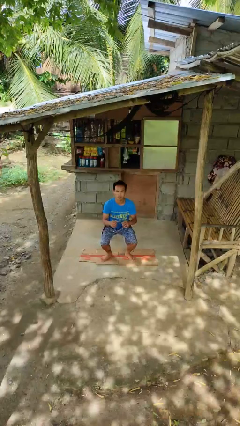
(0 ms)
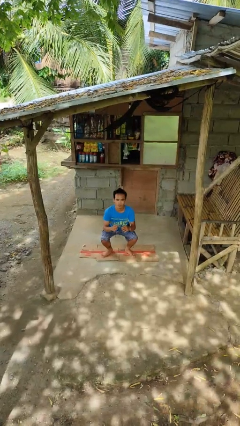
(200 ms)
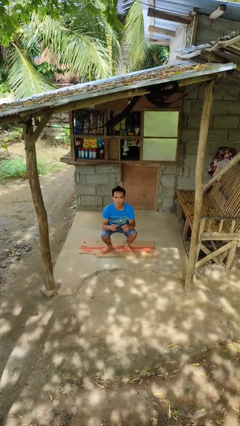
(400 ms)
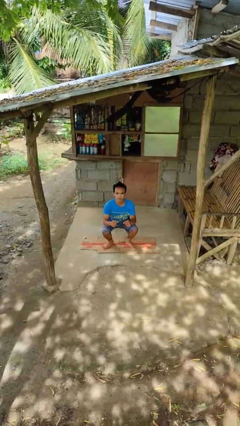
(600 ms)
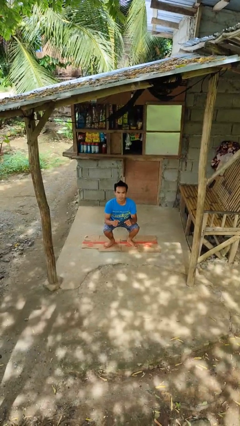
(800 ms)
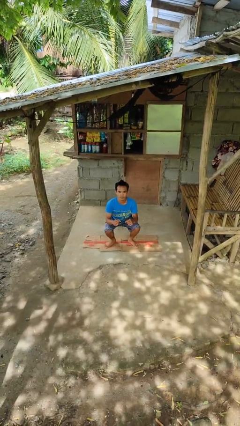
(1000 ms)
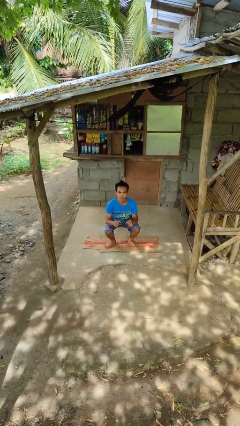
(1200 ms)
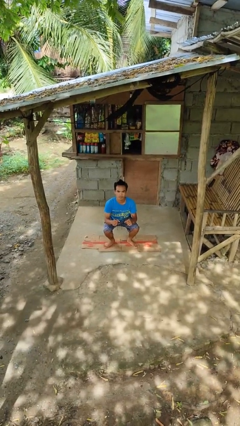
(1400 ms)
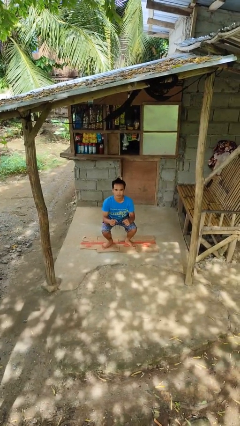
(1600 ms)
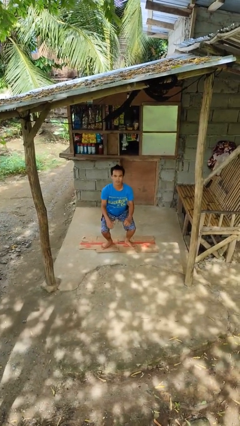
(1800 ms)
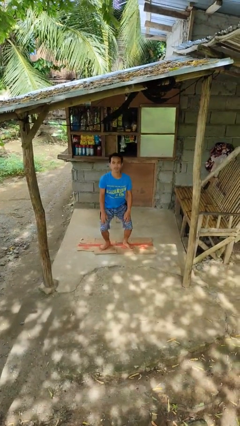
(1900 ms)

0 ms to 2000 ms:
person squats

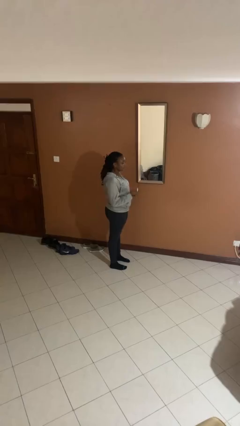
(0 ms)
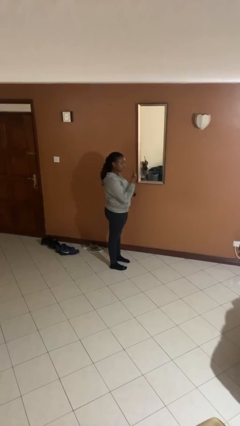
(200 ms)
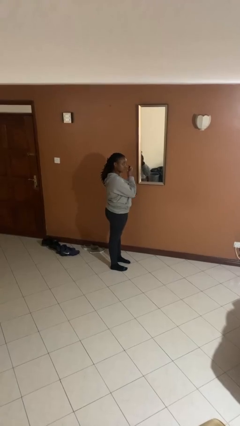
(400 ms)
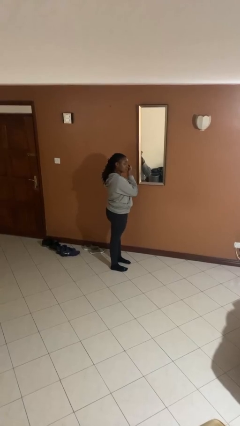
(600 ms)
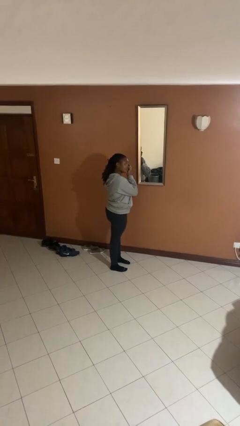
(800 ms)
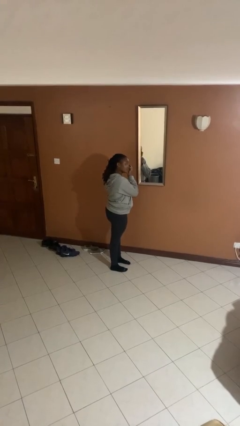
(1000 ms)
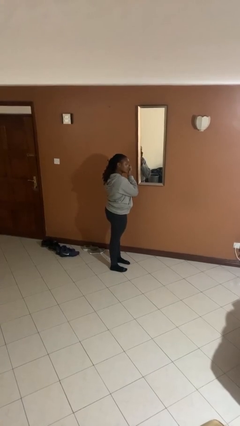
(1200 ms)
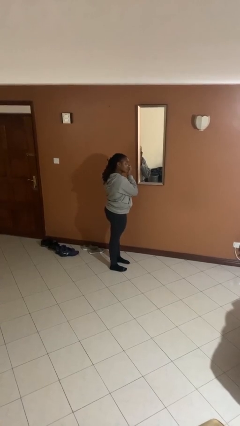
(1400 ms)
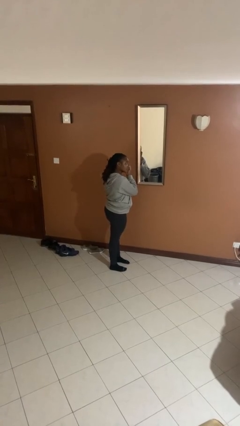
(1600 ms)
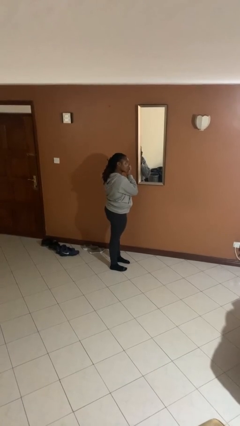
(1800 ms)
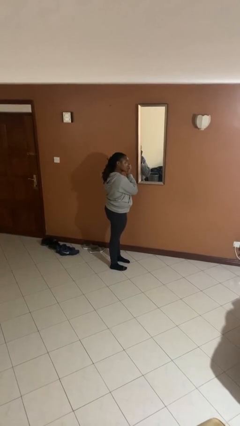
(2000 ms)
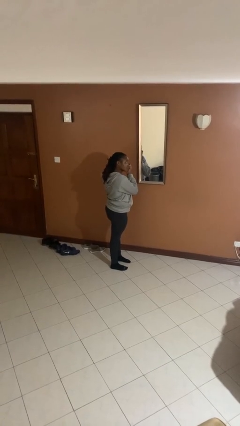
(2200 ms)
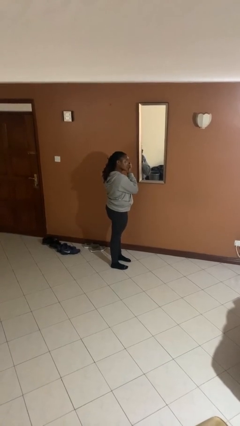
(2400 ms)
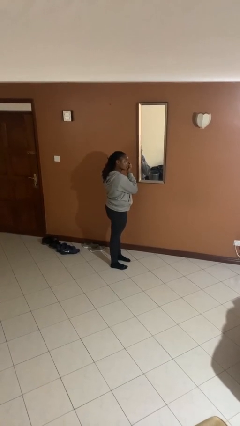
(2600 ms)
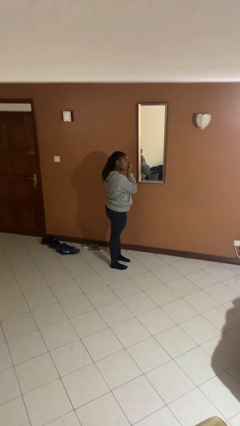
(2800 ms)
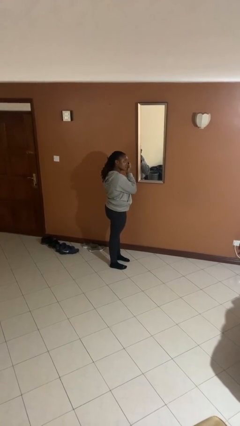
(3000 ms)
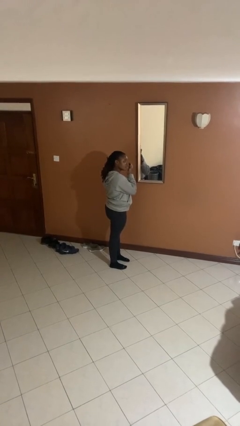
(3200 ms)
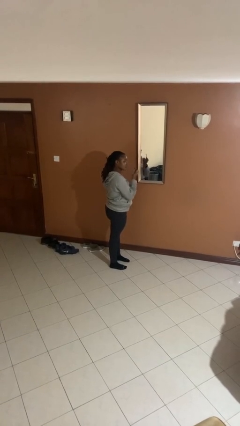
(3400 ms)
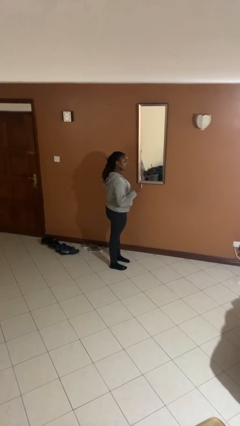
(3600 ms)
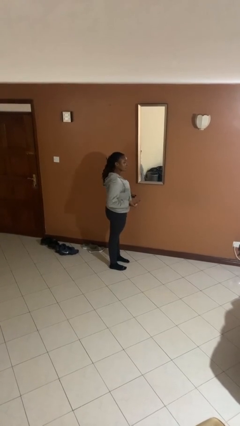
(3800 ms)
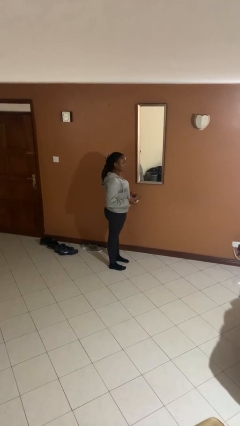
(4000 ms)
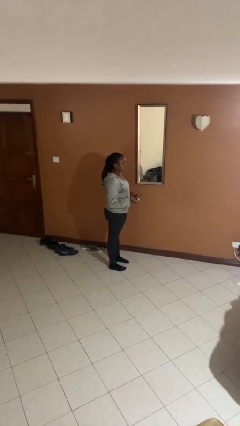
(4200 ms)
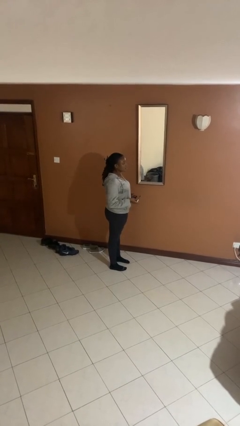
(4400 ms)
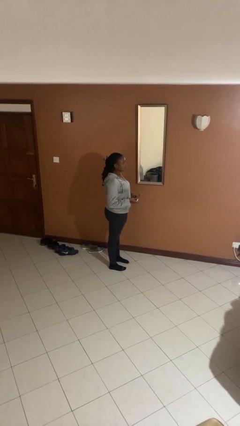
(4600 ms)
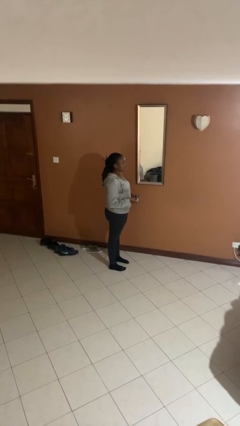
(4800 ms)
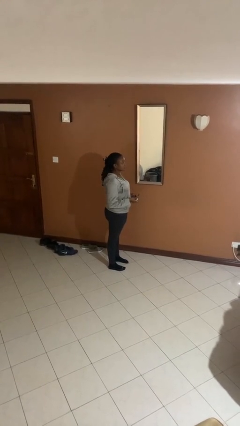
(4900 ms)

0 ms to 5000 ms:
person applies eye makeup

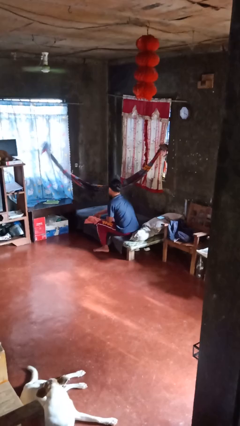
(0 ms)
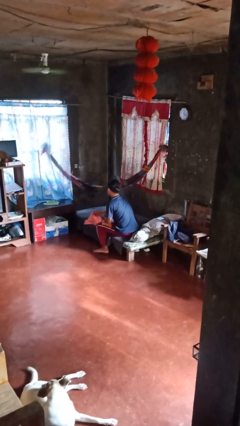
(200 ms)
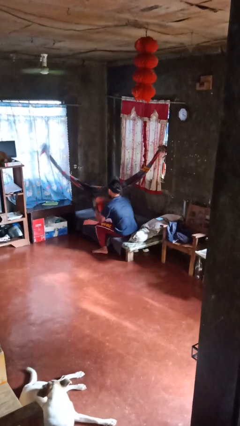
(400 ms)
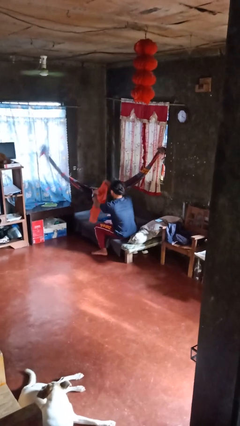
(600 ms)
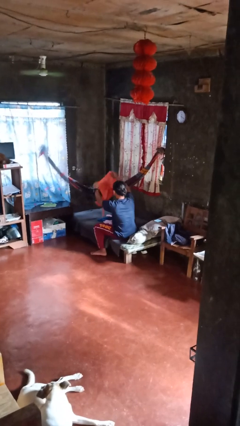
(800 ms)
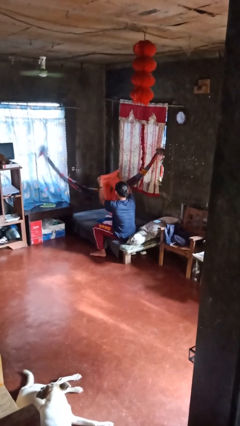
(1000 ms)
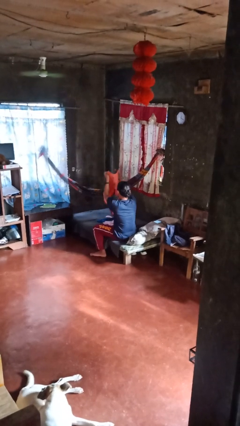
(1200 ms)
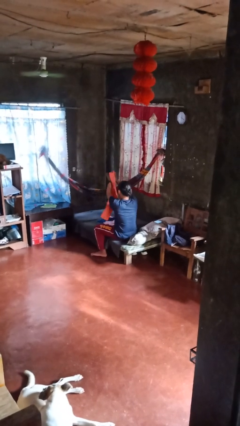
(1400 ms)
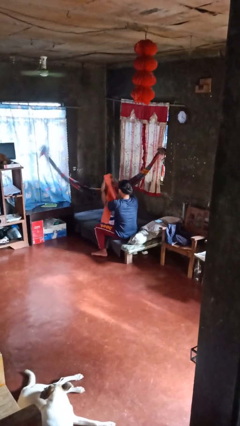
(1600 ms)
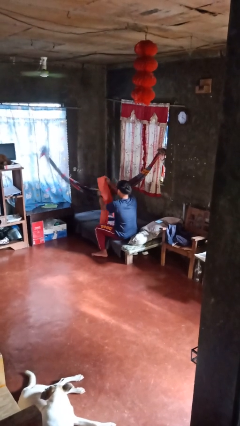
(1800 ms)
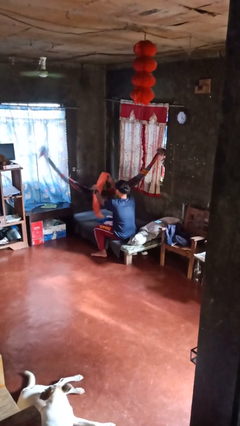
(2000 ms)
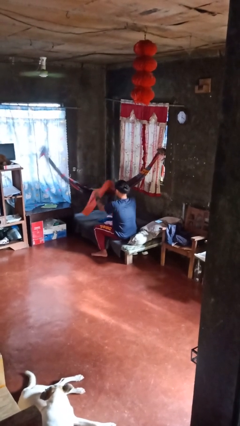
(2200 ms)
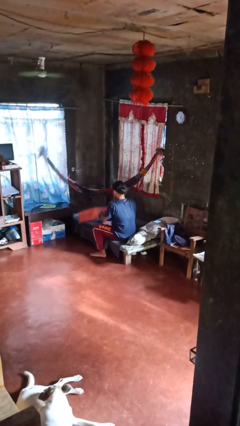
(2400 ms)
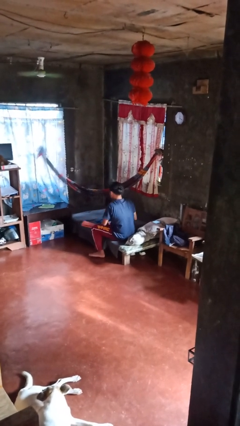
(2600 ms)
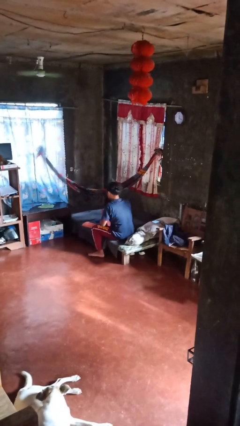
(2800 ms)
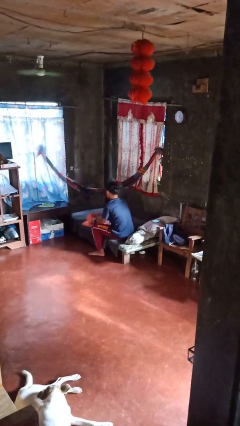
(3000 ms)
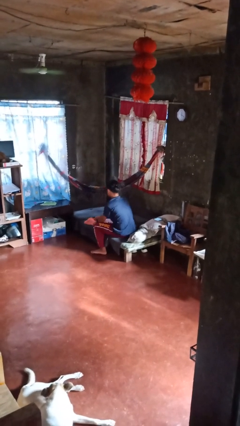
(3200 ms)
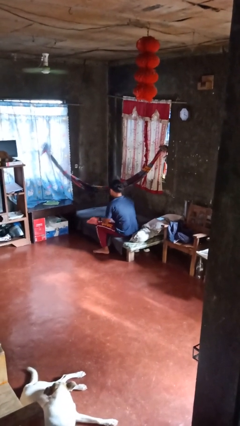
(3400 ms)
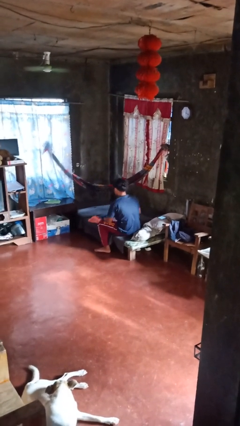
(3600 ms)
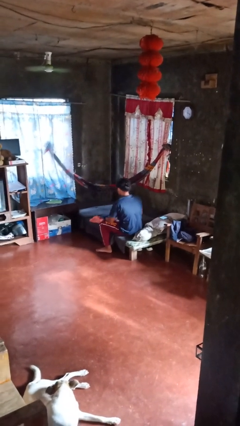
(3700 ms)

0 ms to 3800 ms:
person folds pants

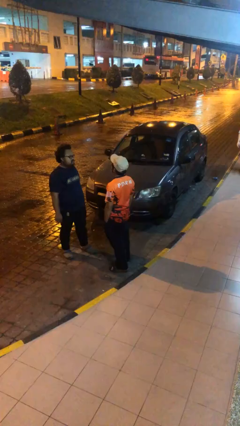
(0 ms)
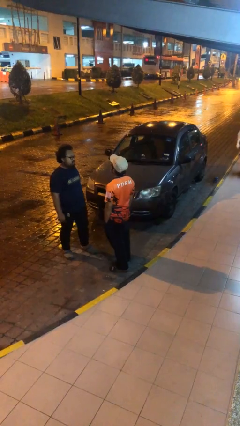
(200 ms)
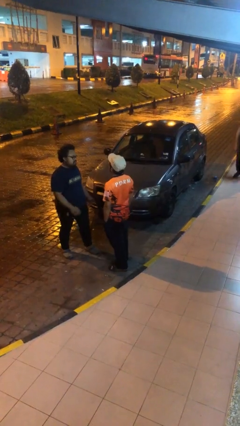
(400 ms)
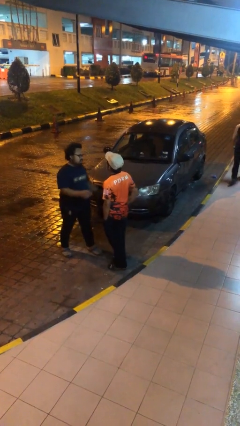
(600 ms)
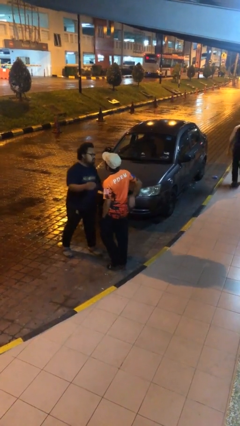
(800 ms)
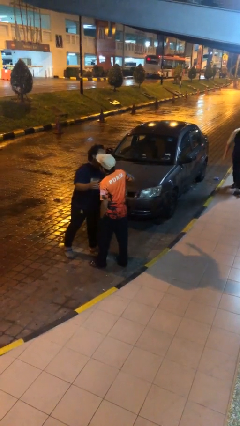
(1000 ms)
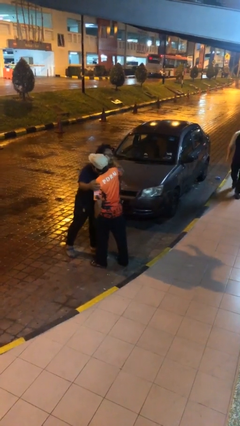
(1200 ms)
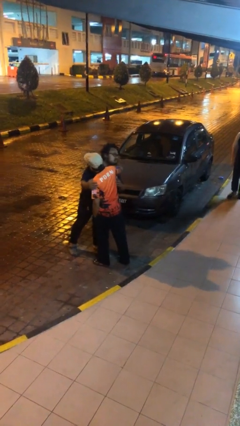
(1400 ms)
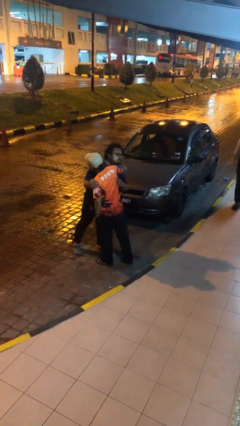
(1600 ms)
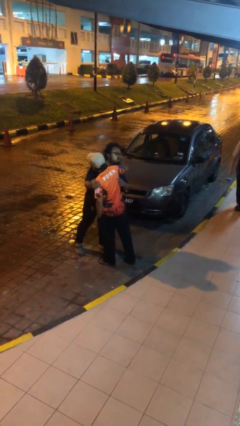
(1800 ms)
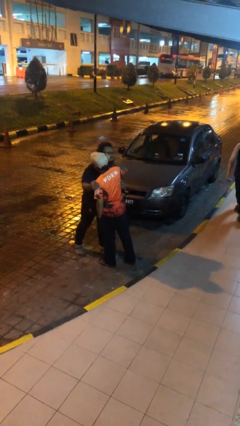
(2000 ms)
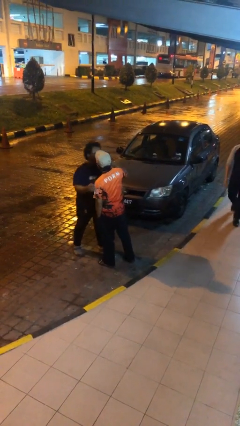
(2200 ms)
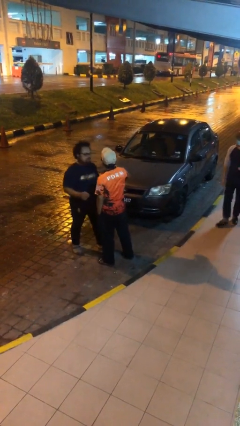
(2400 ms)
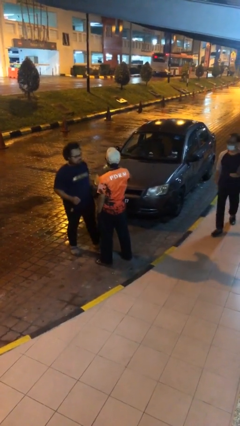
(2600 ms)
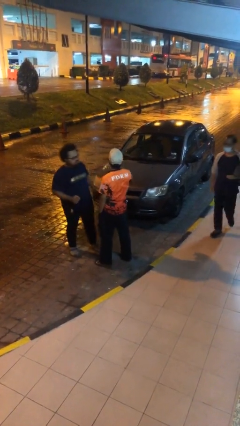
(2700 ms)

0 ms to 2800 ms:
person embraces person

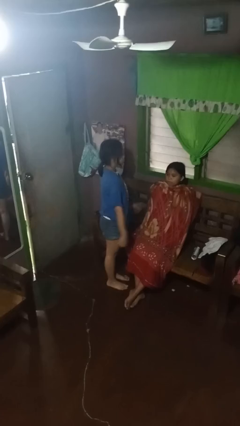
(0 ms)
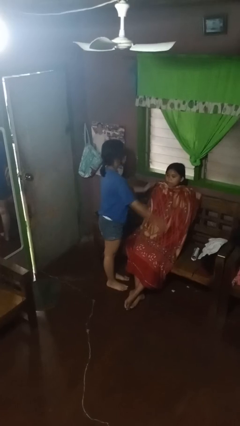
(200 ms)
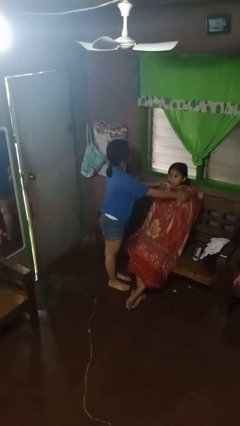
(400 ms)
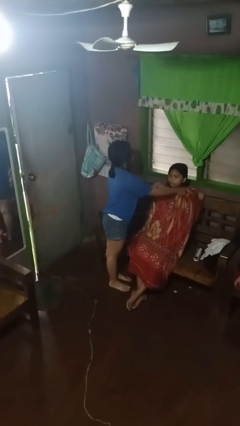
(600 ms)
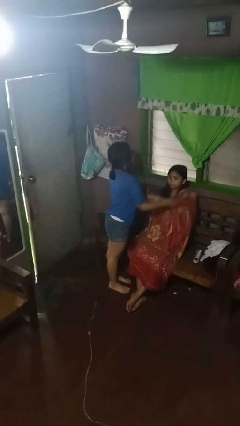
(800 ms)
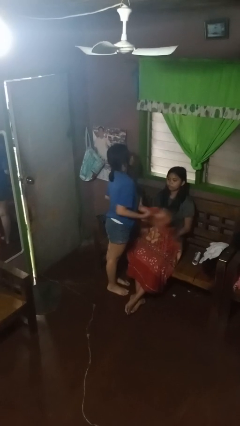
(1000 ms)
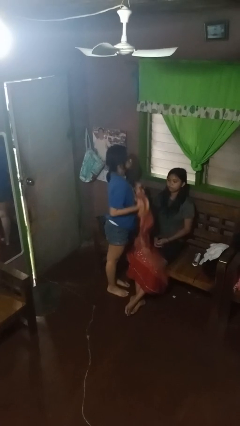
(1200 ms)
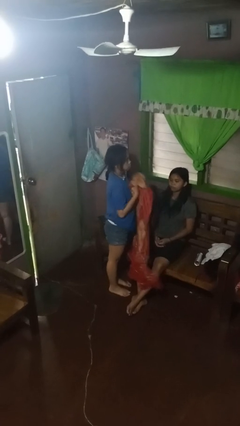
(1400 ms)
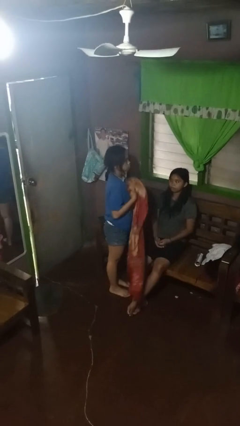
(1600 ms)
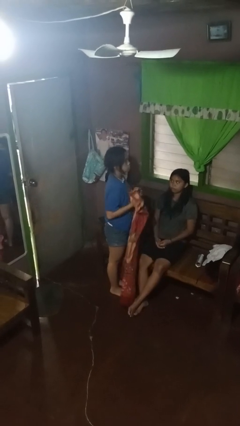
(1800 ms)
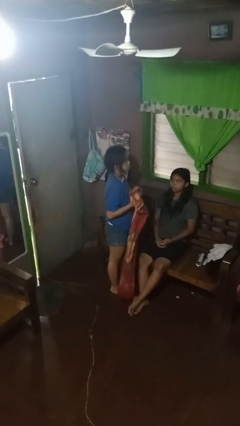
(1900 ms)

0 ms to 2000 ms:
person uncovers friend with blanket

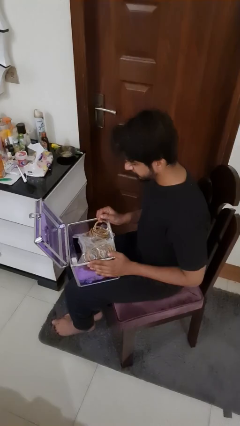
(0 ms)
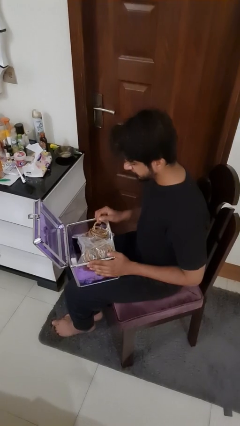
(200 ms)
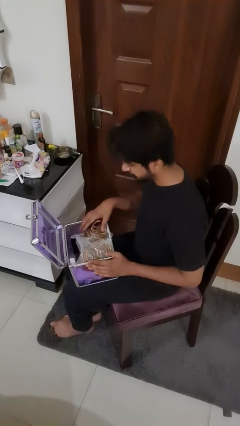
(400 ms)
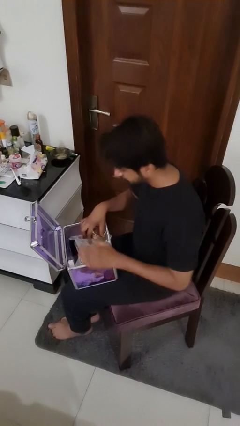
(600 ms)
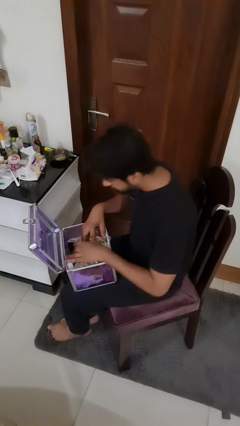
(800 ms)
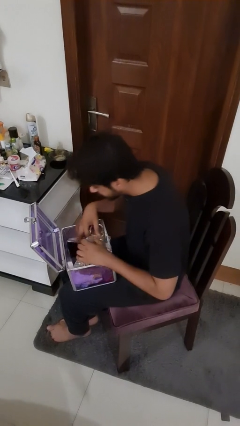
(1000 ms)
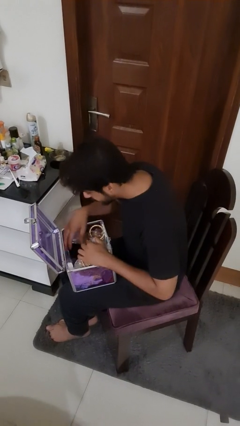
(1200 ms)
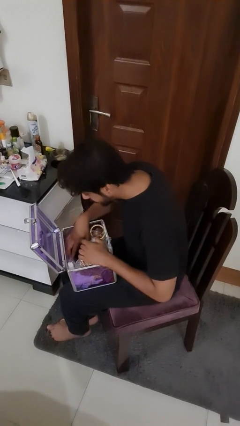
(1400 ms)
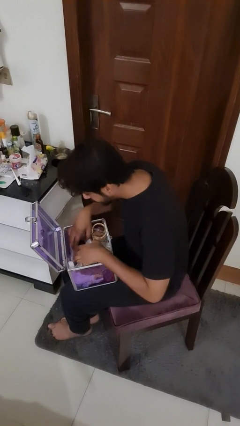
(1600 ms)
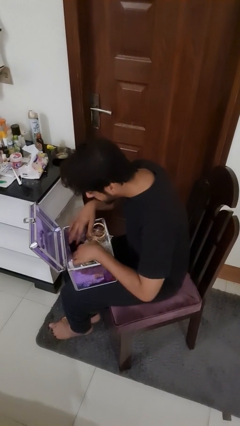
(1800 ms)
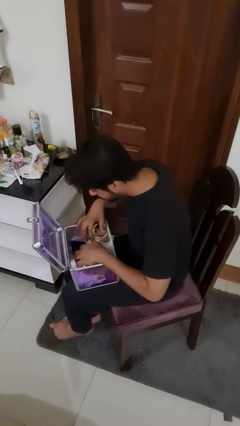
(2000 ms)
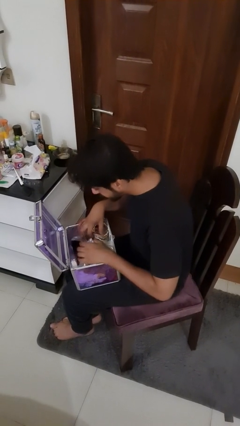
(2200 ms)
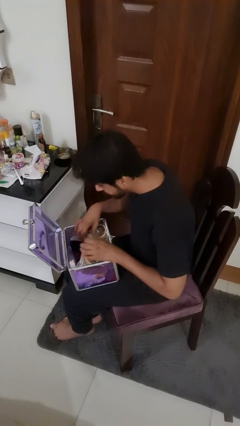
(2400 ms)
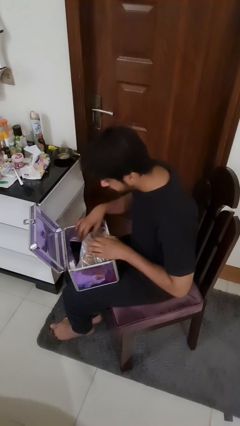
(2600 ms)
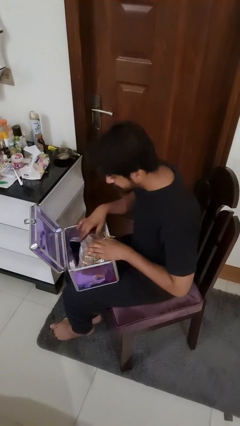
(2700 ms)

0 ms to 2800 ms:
person searches jewelry box
